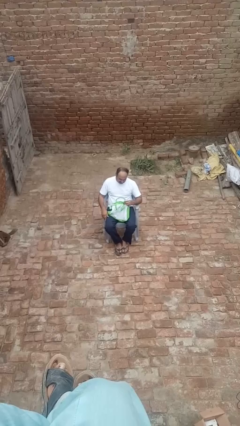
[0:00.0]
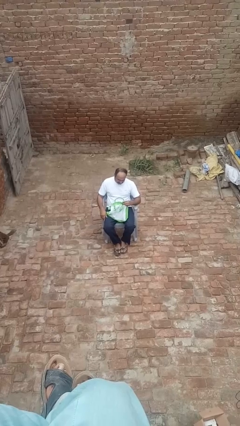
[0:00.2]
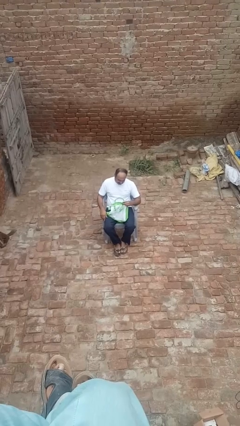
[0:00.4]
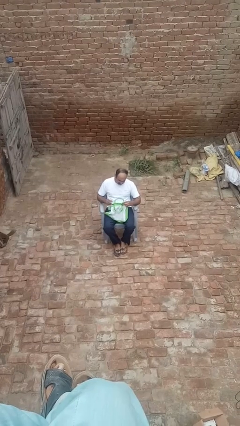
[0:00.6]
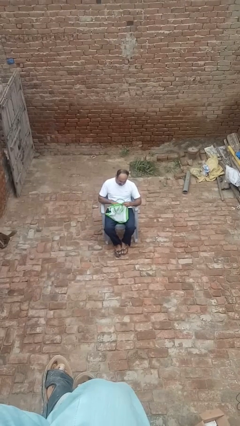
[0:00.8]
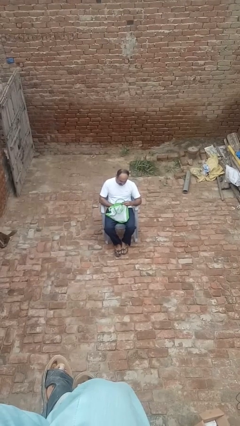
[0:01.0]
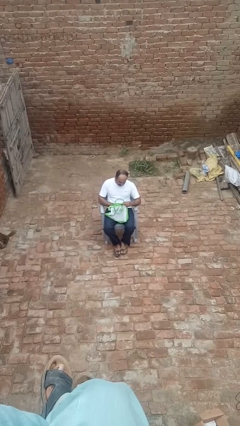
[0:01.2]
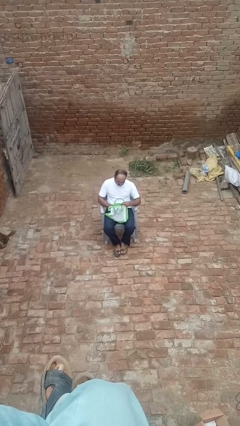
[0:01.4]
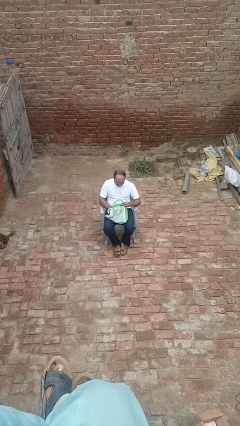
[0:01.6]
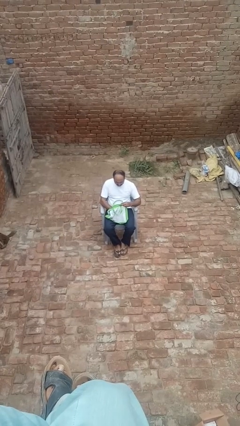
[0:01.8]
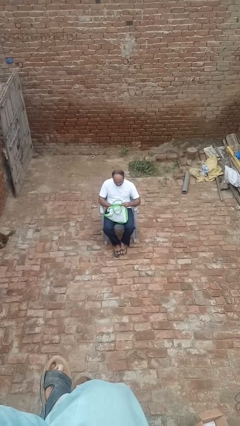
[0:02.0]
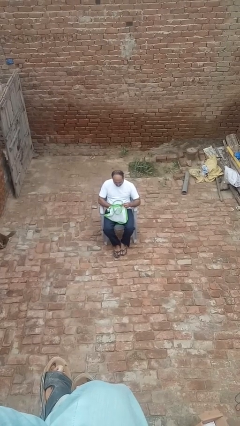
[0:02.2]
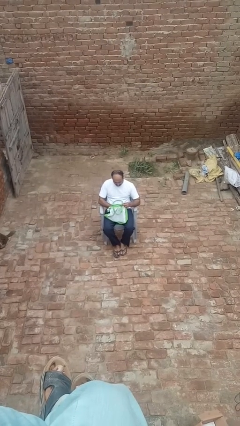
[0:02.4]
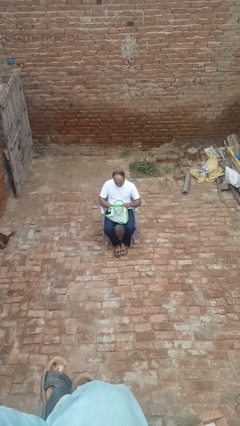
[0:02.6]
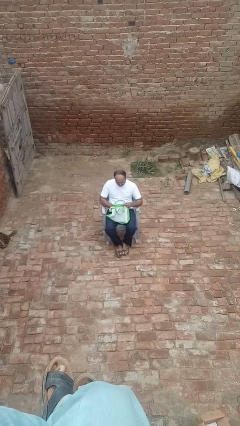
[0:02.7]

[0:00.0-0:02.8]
person searches in bag

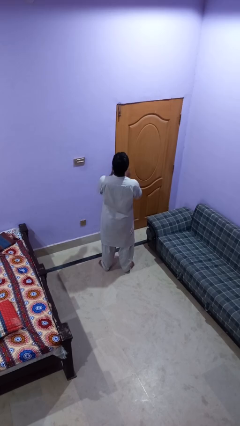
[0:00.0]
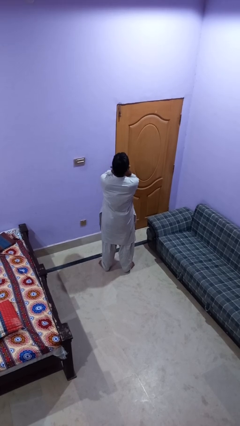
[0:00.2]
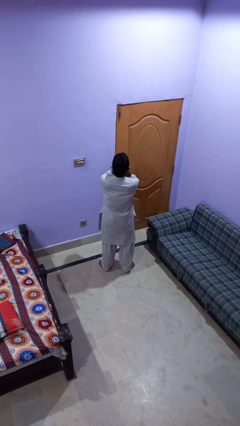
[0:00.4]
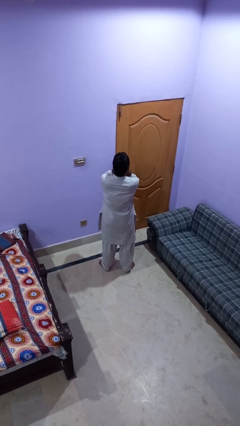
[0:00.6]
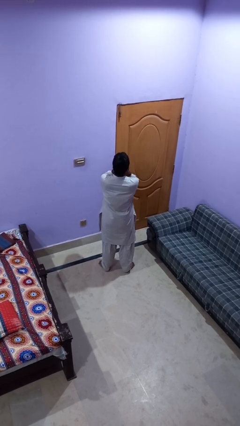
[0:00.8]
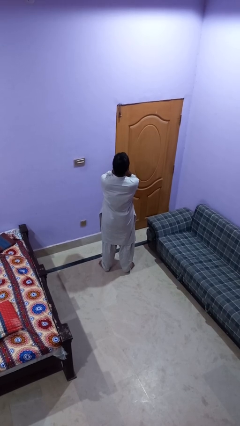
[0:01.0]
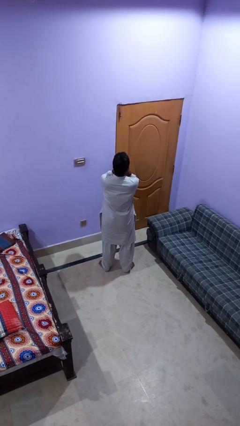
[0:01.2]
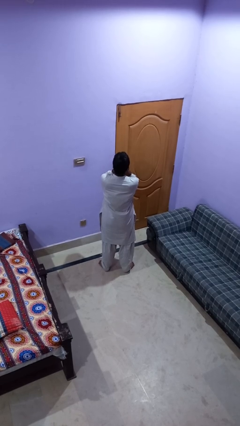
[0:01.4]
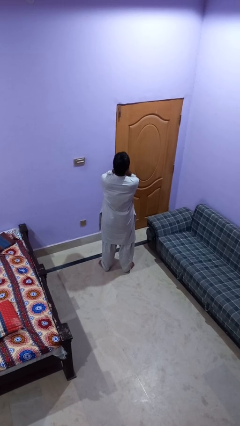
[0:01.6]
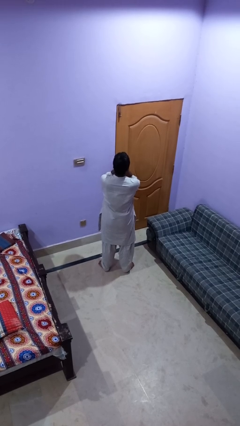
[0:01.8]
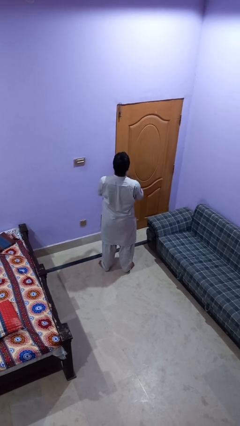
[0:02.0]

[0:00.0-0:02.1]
person covers face with hands

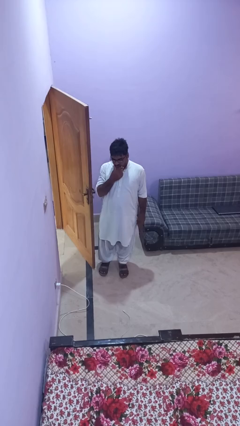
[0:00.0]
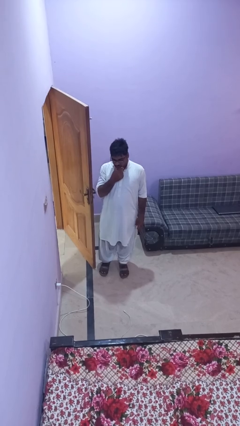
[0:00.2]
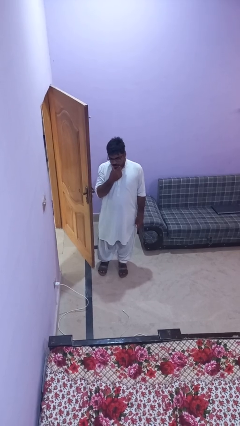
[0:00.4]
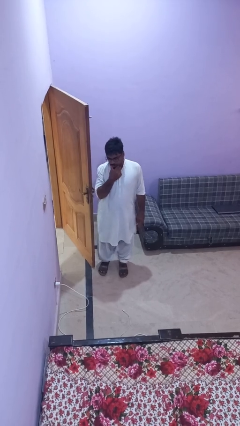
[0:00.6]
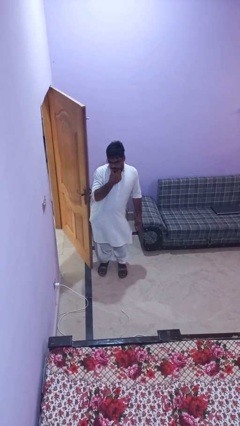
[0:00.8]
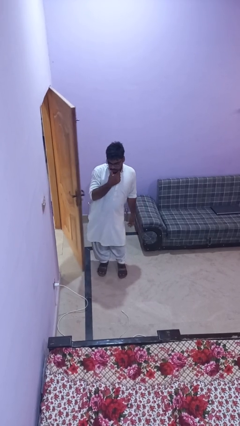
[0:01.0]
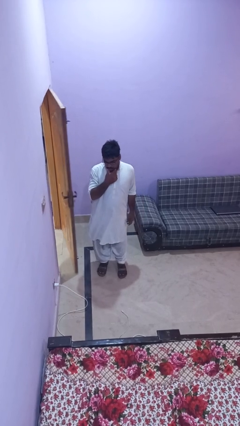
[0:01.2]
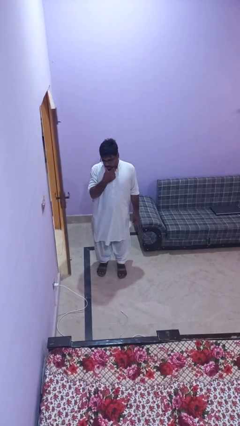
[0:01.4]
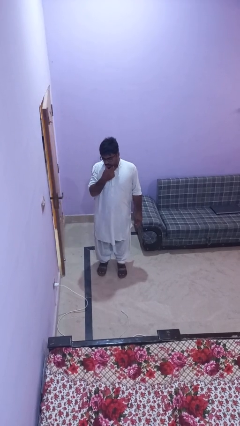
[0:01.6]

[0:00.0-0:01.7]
person closes door with hip

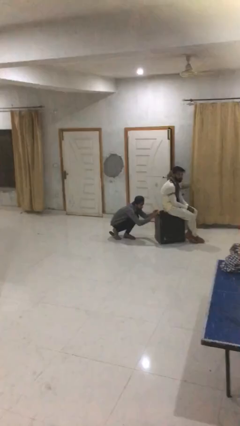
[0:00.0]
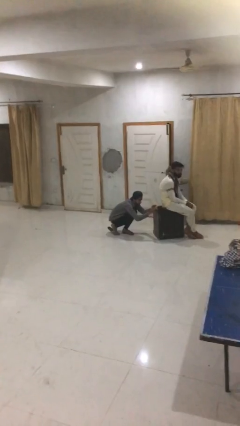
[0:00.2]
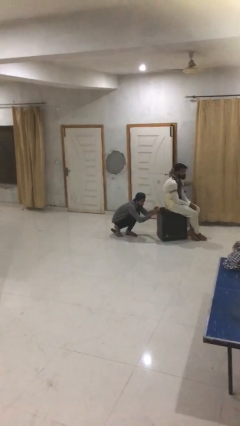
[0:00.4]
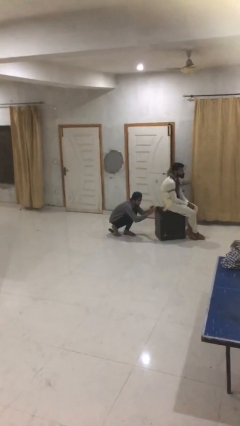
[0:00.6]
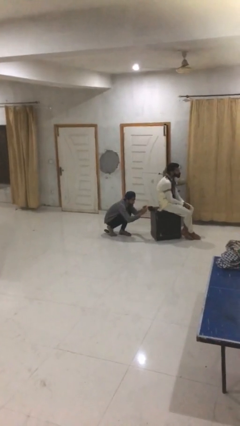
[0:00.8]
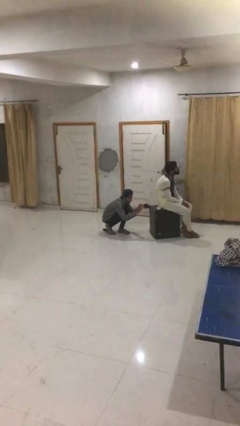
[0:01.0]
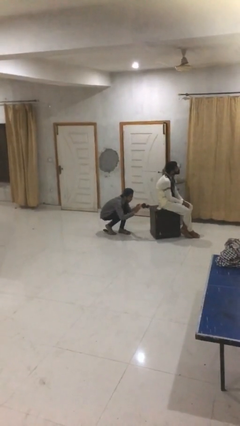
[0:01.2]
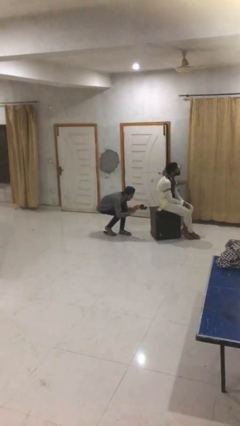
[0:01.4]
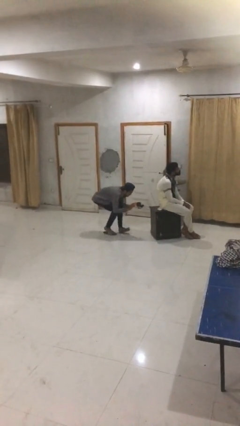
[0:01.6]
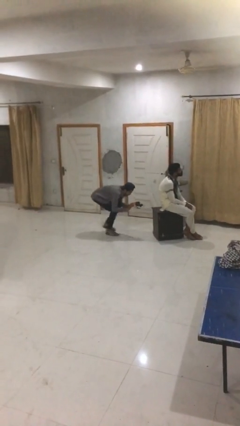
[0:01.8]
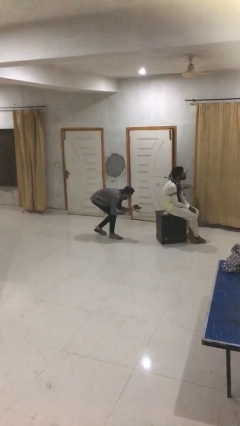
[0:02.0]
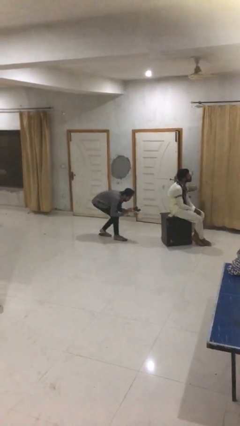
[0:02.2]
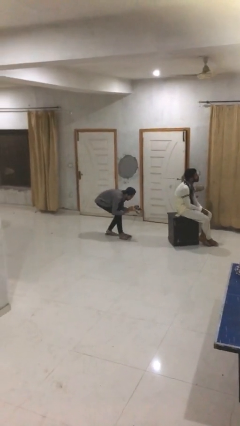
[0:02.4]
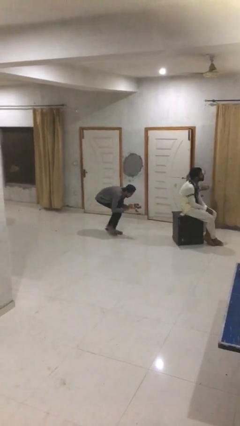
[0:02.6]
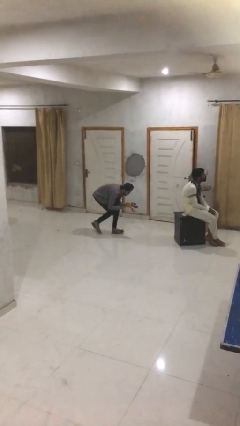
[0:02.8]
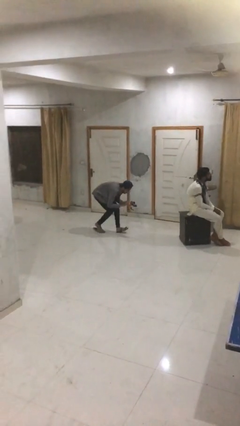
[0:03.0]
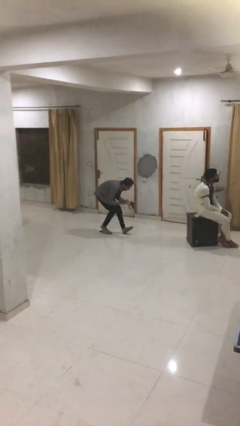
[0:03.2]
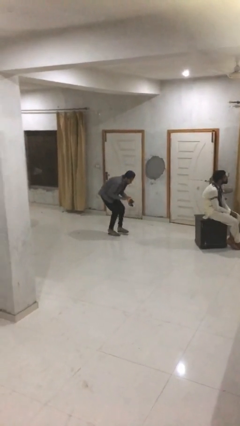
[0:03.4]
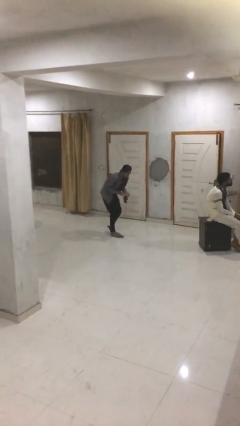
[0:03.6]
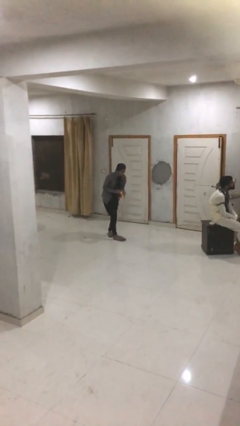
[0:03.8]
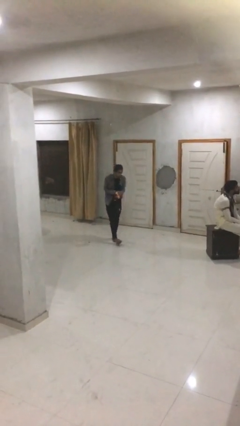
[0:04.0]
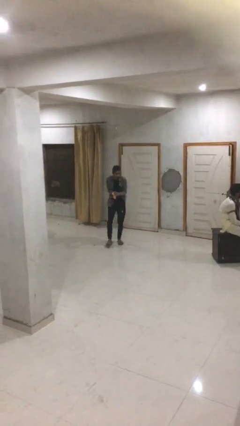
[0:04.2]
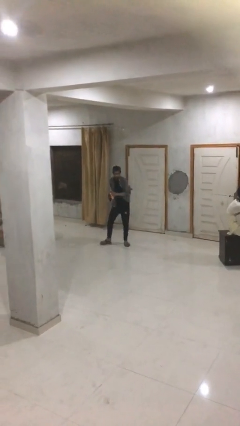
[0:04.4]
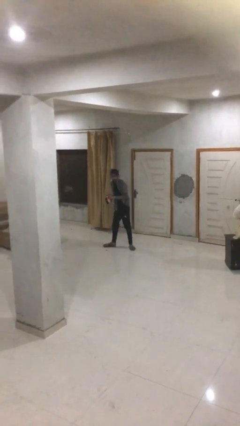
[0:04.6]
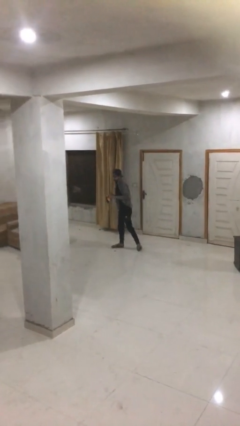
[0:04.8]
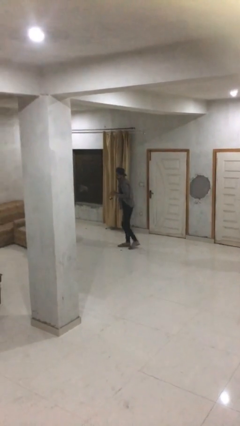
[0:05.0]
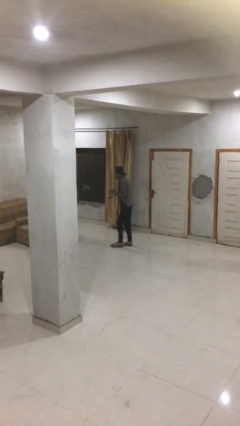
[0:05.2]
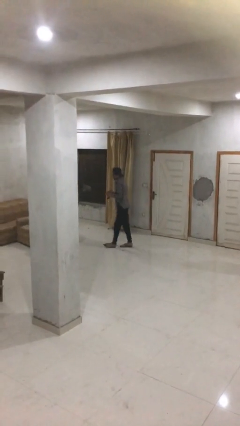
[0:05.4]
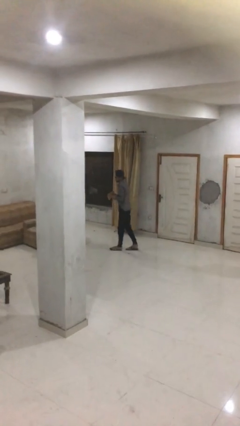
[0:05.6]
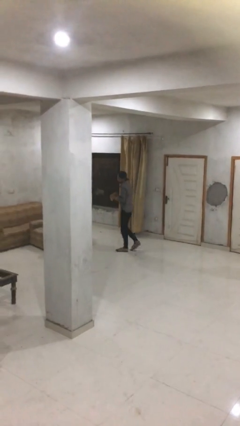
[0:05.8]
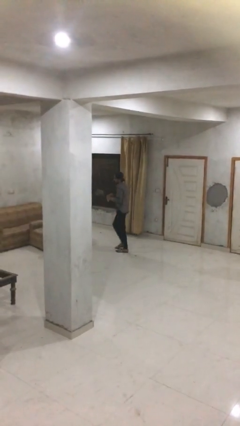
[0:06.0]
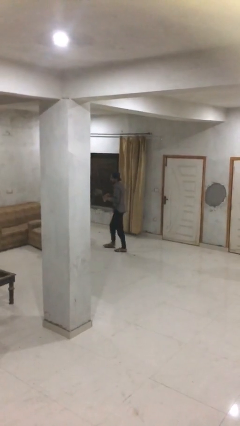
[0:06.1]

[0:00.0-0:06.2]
person steals object from person

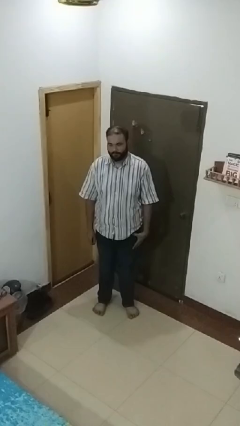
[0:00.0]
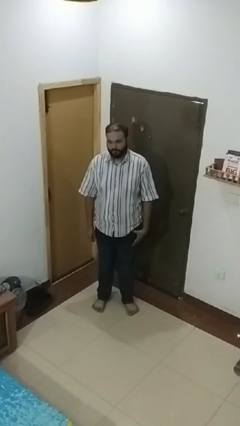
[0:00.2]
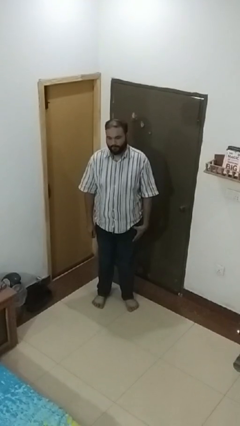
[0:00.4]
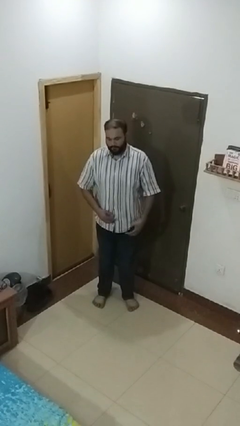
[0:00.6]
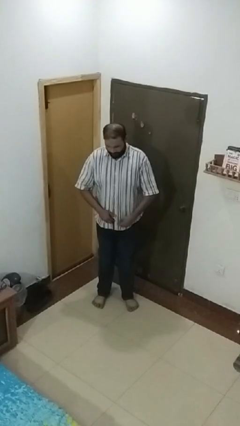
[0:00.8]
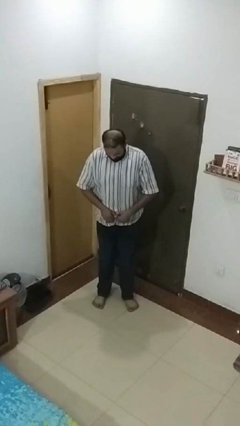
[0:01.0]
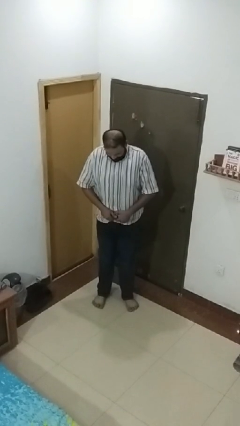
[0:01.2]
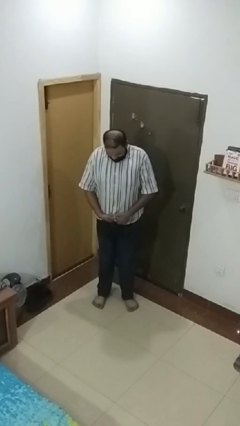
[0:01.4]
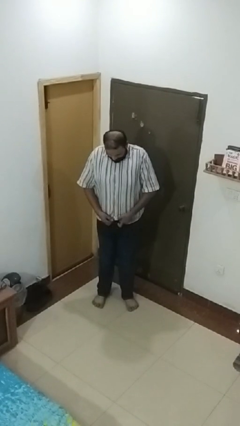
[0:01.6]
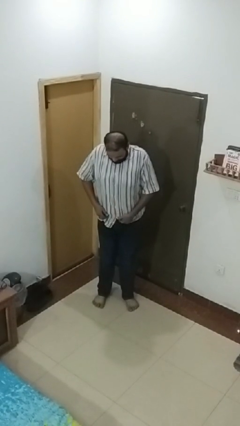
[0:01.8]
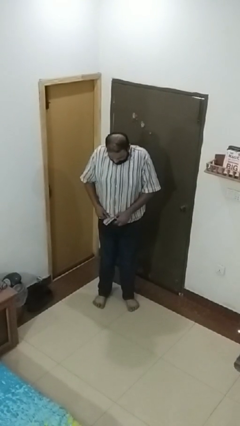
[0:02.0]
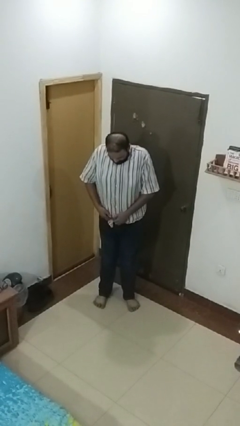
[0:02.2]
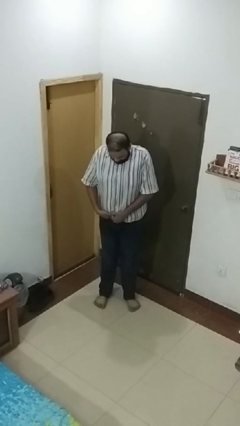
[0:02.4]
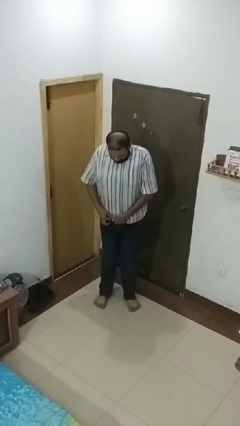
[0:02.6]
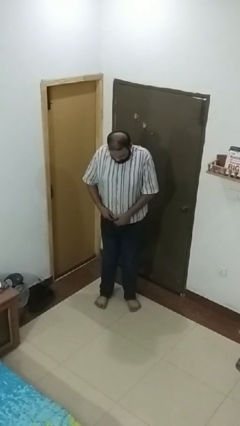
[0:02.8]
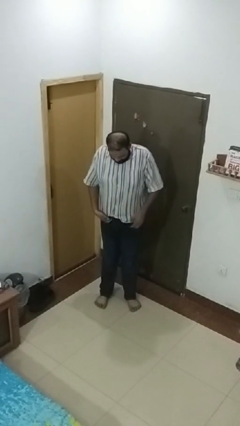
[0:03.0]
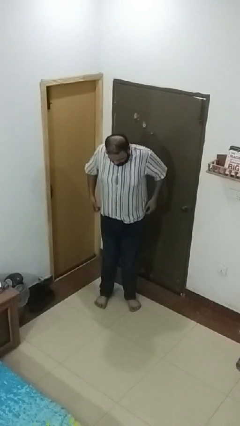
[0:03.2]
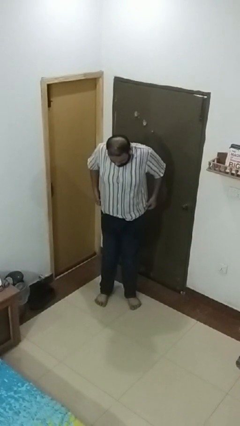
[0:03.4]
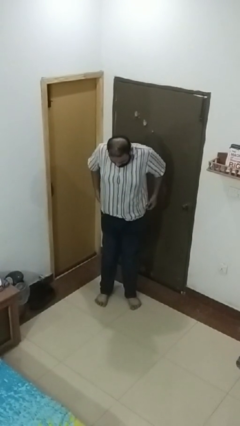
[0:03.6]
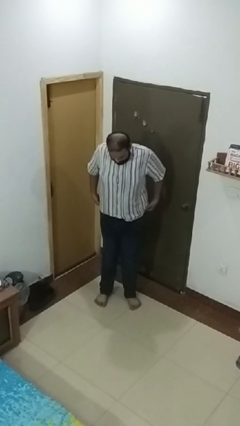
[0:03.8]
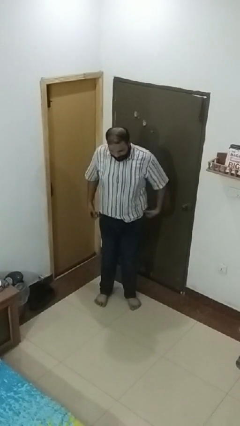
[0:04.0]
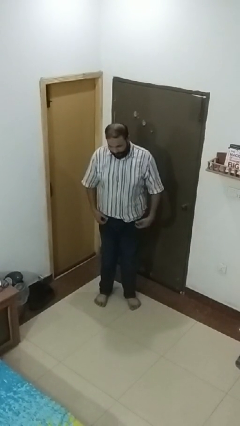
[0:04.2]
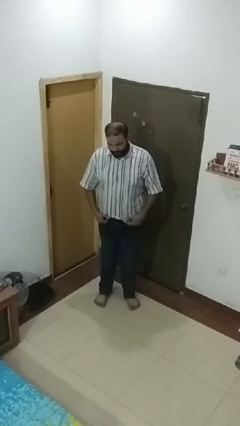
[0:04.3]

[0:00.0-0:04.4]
person tucks in shirt

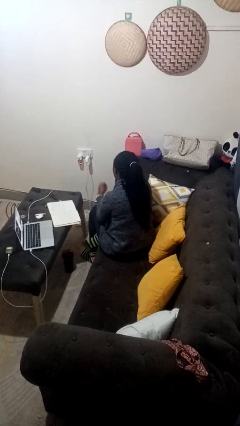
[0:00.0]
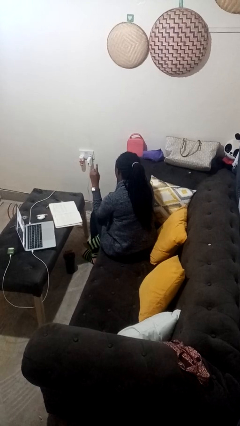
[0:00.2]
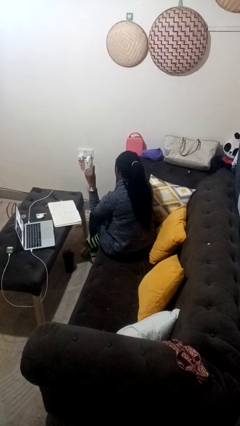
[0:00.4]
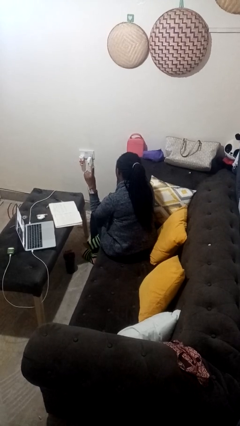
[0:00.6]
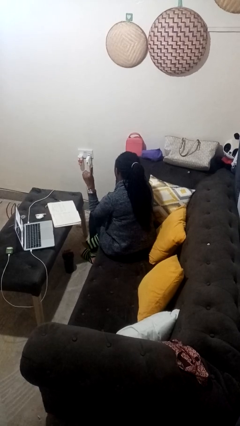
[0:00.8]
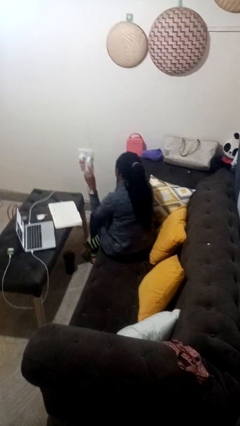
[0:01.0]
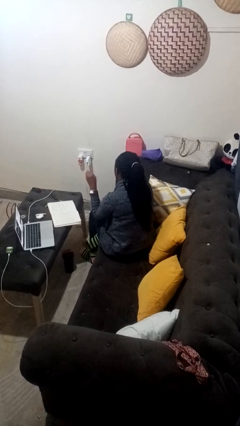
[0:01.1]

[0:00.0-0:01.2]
person gestures number one
